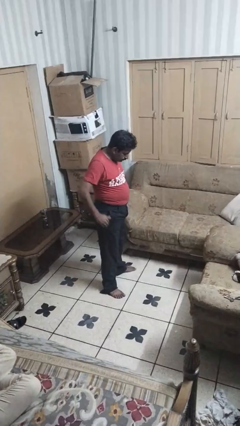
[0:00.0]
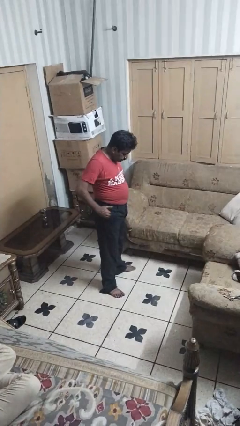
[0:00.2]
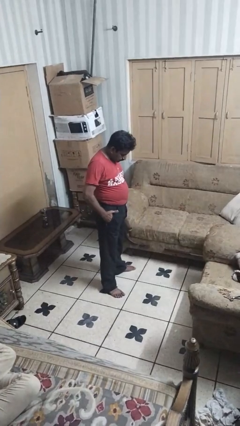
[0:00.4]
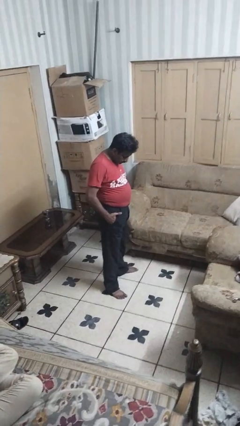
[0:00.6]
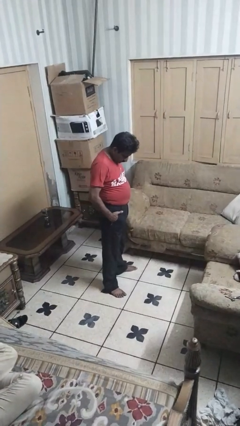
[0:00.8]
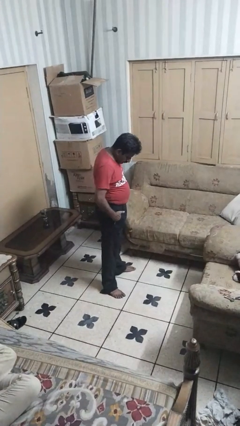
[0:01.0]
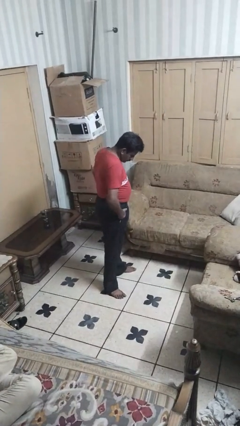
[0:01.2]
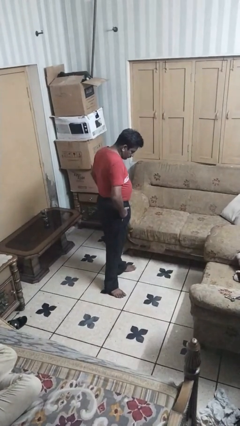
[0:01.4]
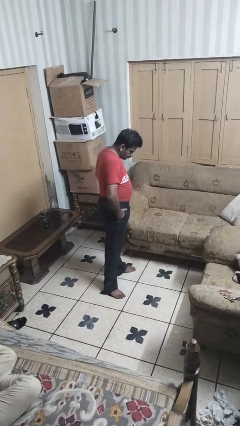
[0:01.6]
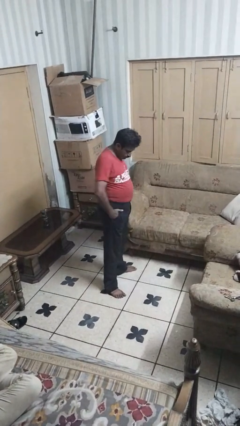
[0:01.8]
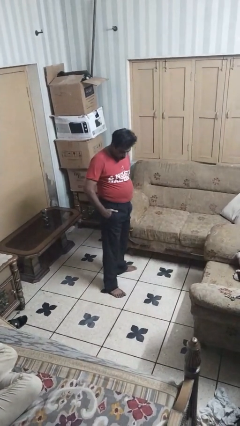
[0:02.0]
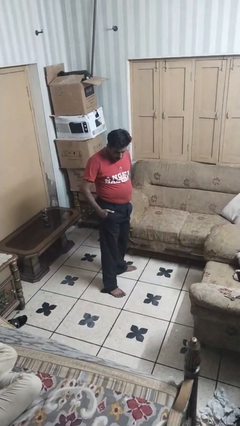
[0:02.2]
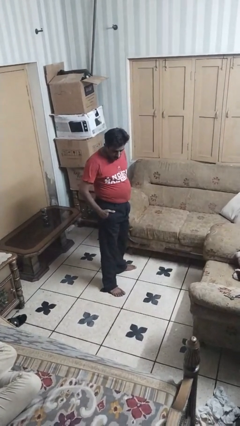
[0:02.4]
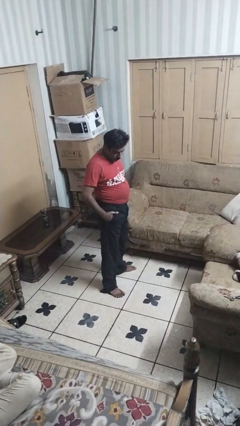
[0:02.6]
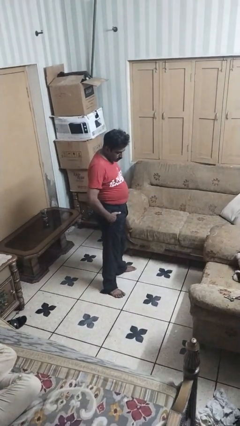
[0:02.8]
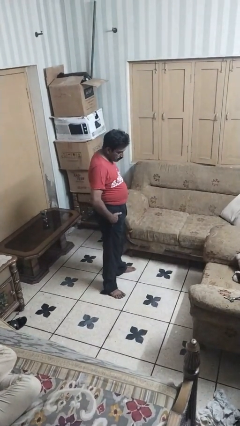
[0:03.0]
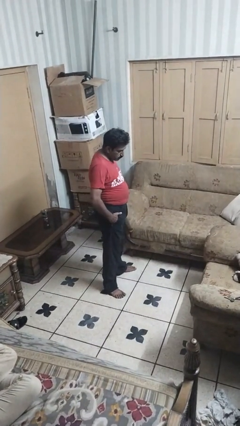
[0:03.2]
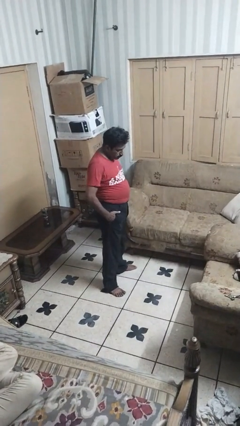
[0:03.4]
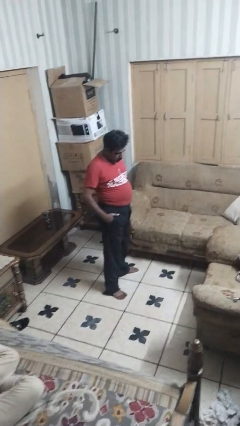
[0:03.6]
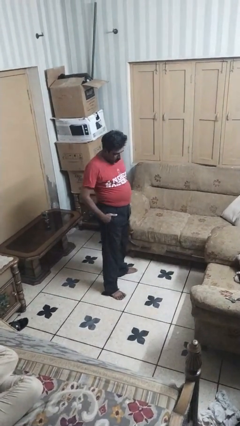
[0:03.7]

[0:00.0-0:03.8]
person puts hands in back pockets

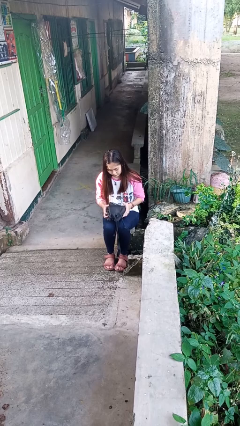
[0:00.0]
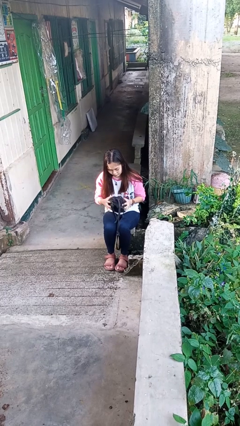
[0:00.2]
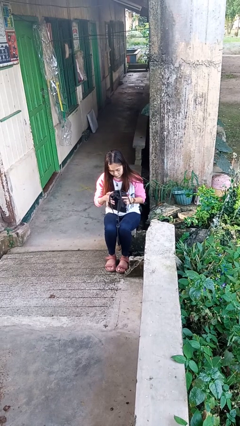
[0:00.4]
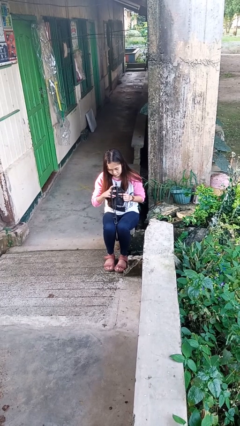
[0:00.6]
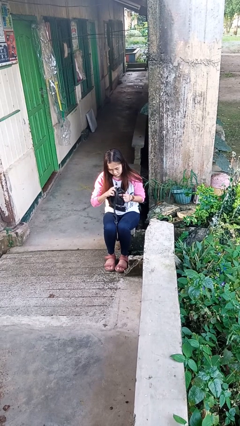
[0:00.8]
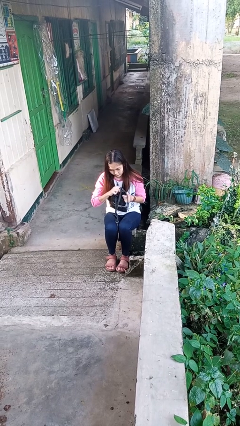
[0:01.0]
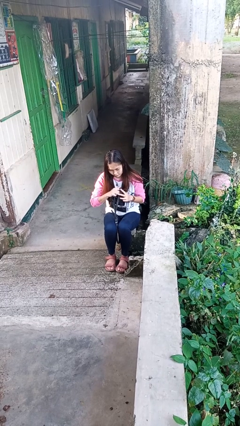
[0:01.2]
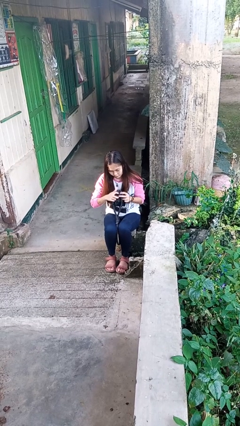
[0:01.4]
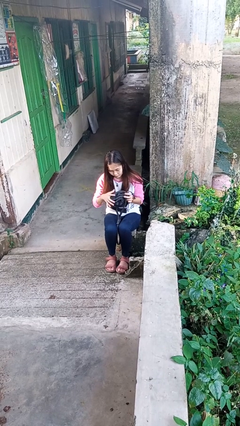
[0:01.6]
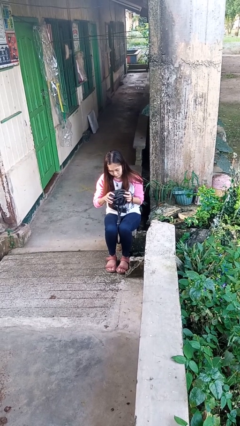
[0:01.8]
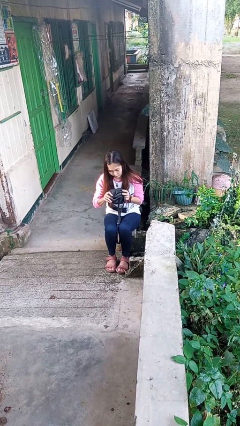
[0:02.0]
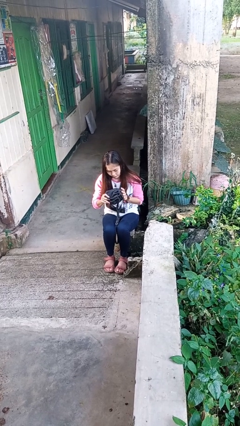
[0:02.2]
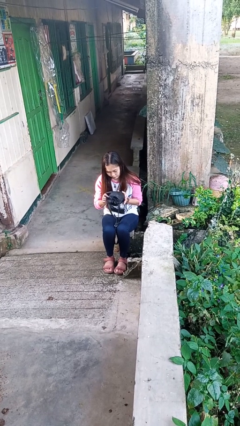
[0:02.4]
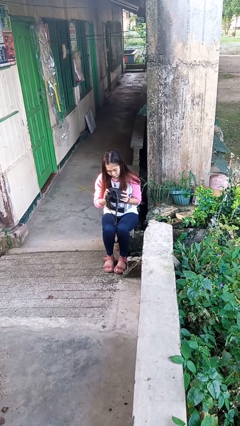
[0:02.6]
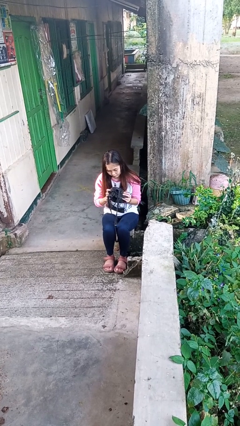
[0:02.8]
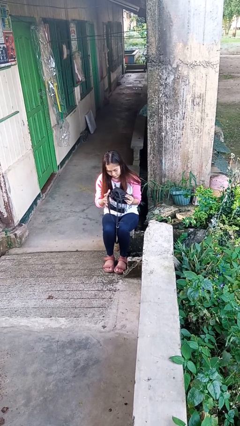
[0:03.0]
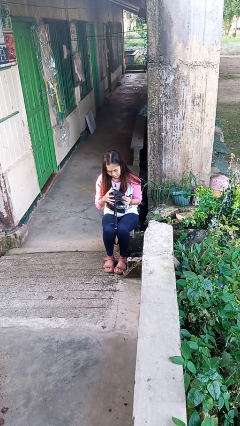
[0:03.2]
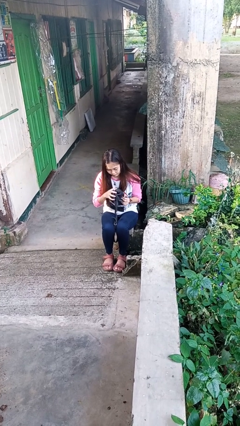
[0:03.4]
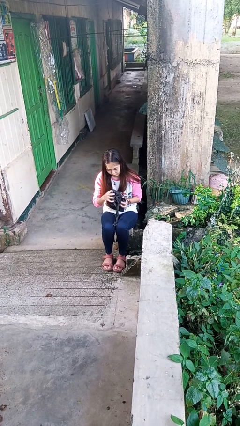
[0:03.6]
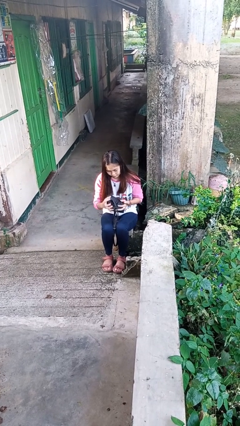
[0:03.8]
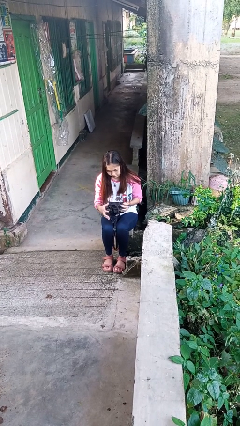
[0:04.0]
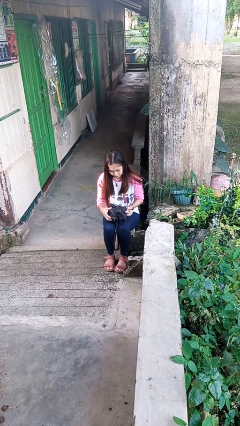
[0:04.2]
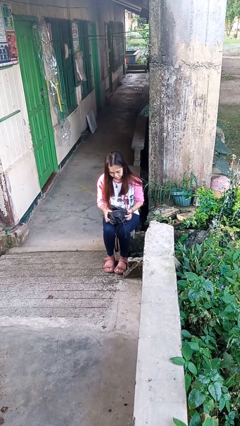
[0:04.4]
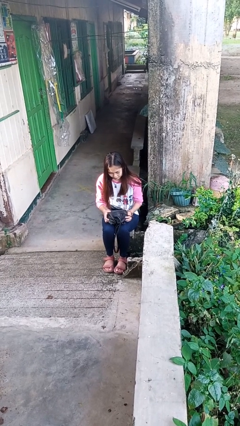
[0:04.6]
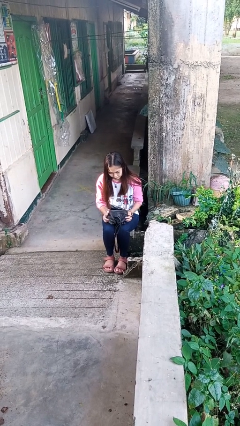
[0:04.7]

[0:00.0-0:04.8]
person squeezes object

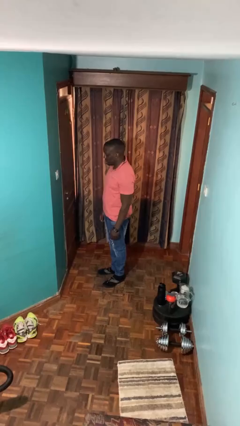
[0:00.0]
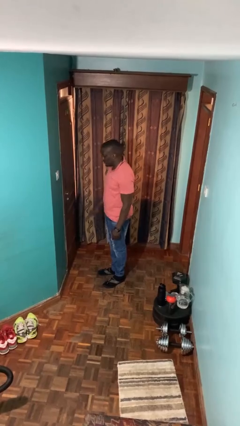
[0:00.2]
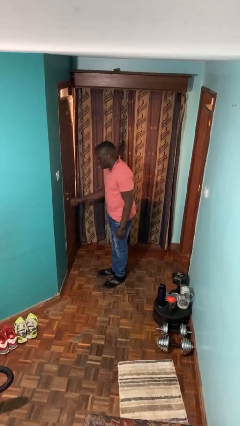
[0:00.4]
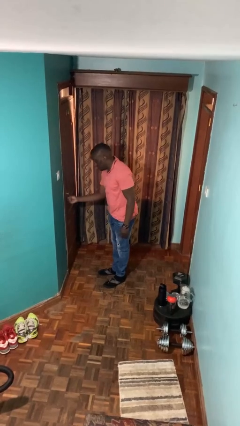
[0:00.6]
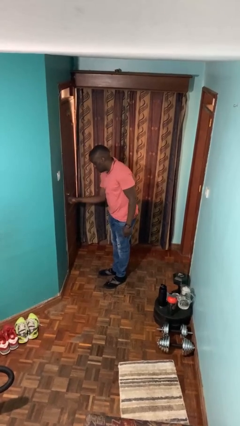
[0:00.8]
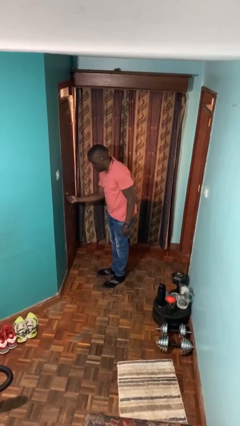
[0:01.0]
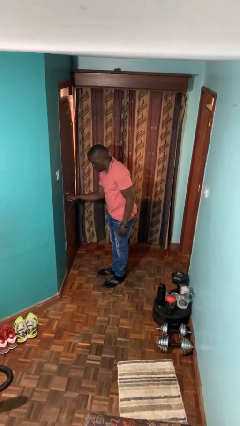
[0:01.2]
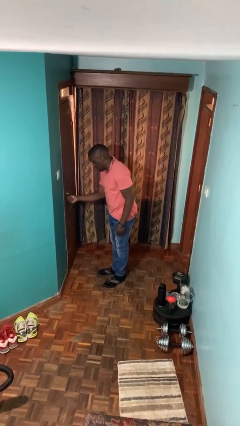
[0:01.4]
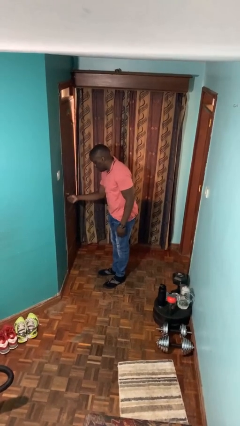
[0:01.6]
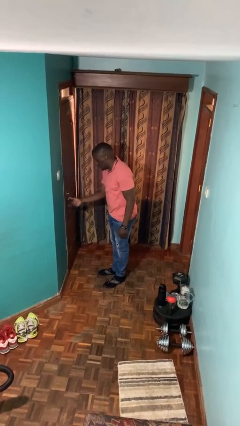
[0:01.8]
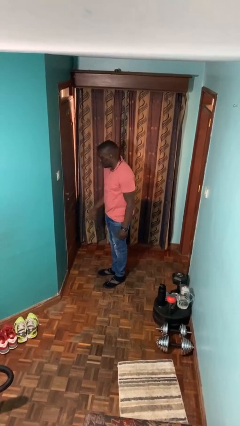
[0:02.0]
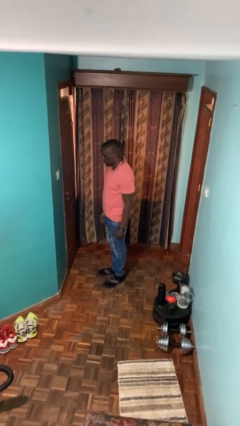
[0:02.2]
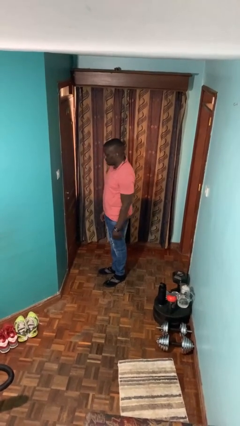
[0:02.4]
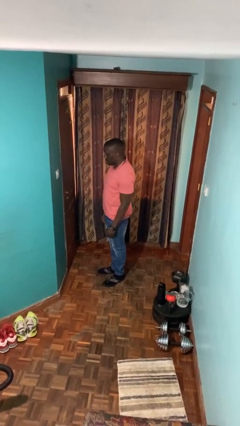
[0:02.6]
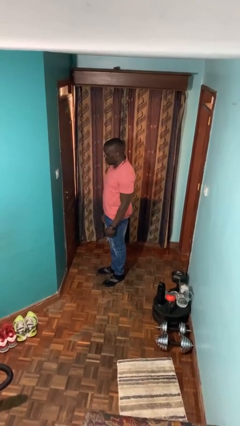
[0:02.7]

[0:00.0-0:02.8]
person unlocks door with keys

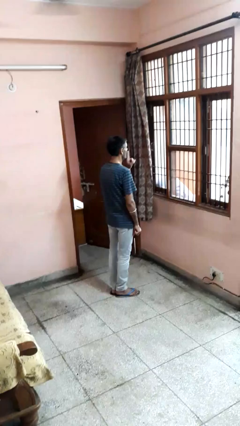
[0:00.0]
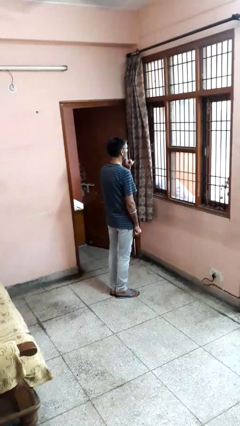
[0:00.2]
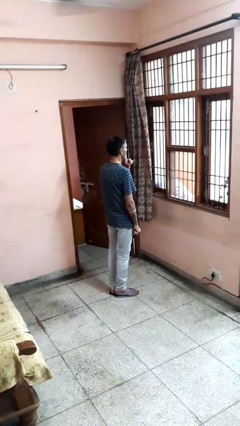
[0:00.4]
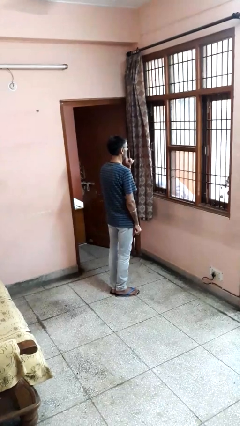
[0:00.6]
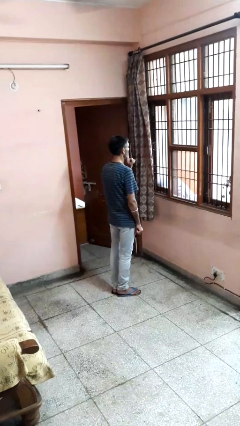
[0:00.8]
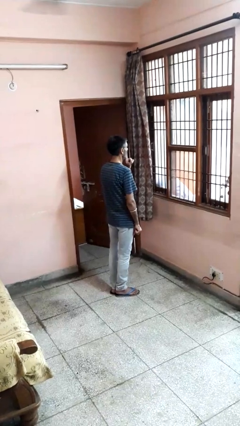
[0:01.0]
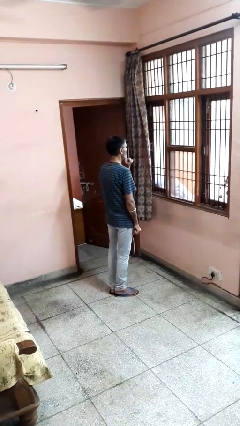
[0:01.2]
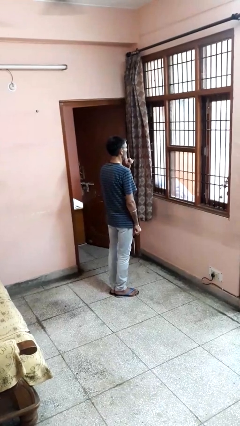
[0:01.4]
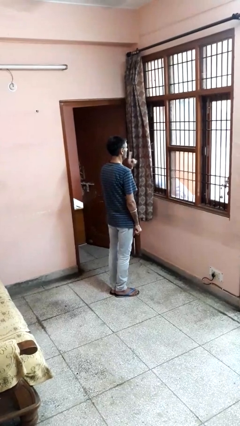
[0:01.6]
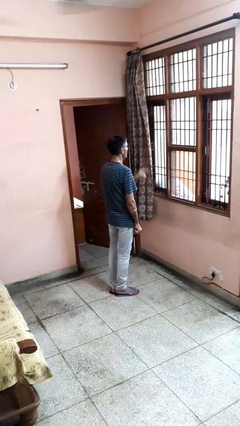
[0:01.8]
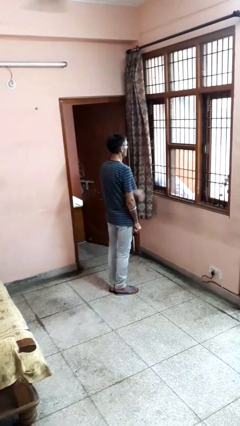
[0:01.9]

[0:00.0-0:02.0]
person gestures be quiet

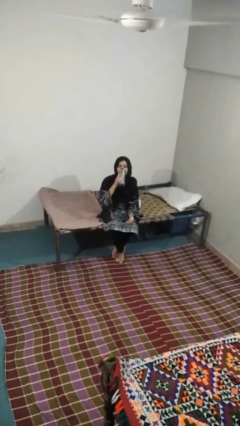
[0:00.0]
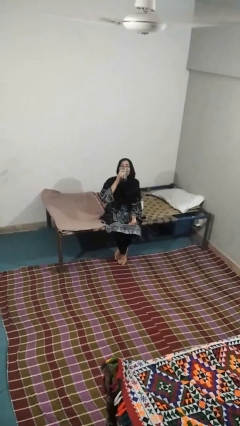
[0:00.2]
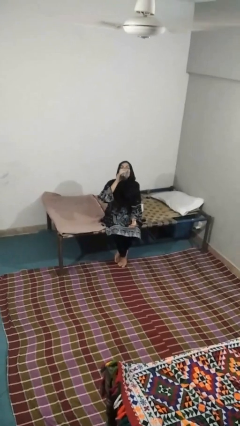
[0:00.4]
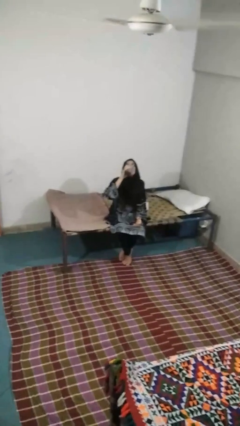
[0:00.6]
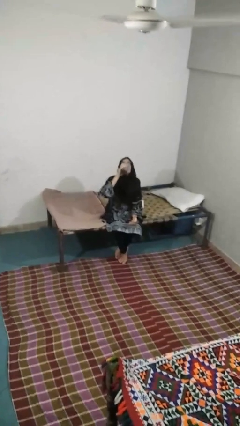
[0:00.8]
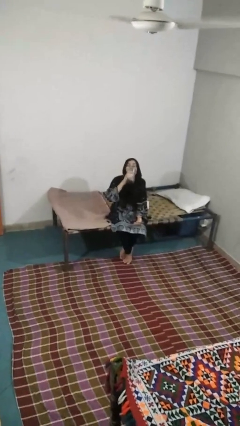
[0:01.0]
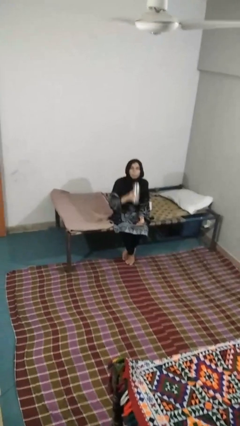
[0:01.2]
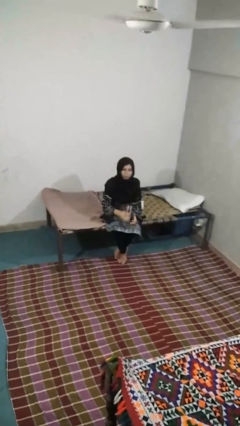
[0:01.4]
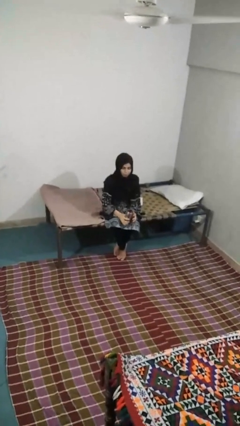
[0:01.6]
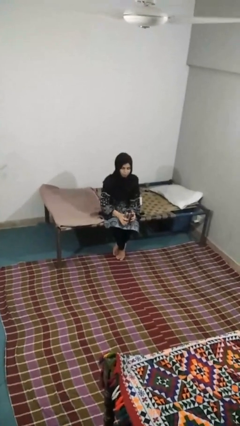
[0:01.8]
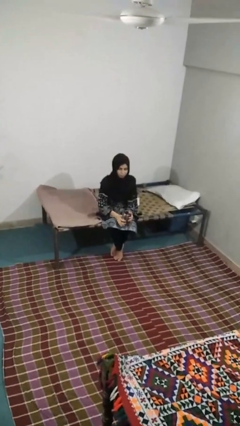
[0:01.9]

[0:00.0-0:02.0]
person drinks from beverage can

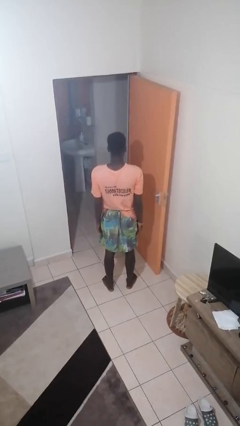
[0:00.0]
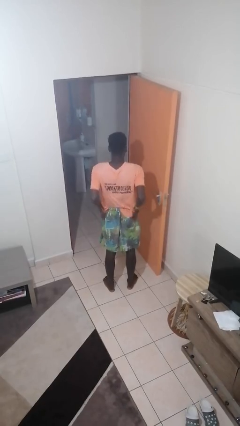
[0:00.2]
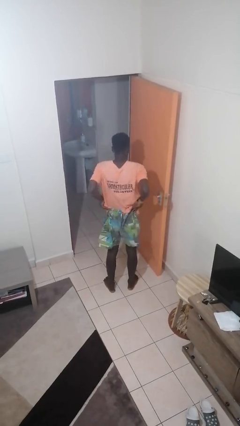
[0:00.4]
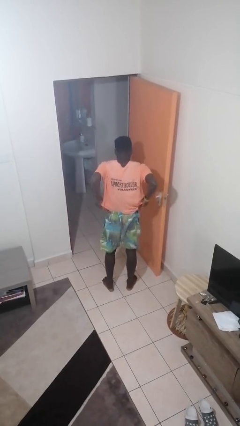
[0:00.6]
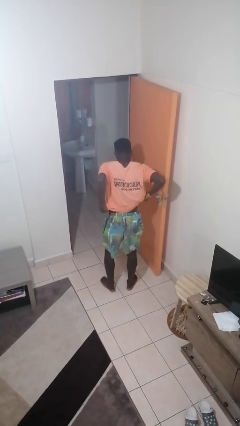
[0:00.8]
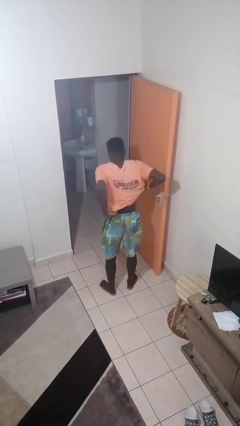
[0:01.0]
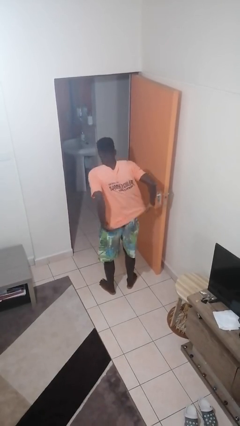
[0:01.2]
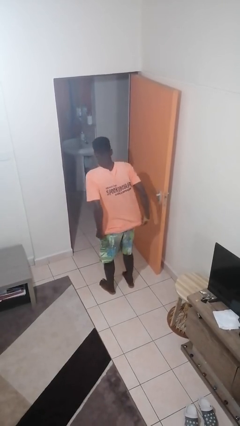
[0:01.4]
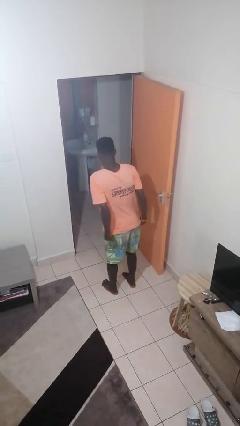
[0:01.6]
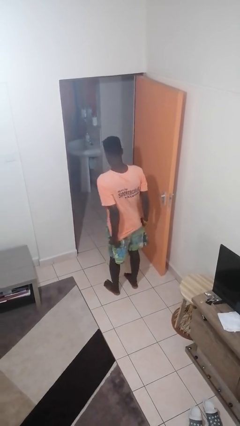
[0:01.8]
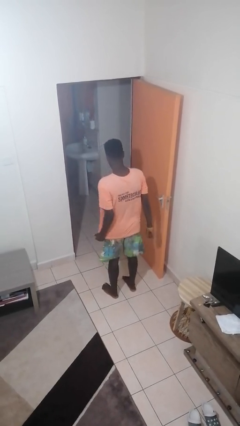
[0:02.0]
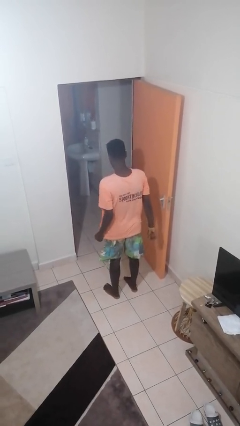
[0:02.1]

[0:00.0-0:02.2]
person untucks shirt
